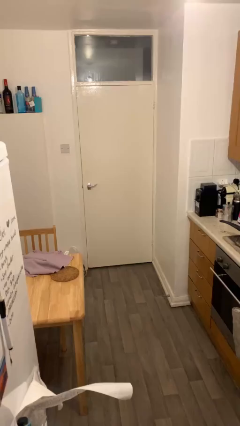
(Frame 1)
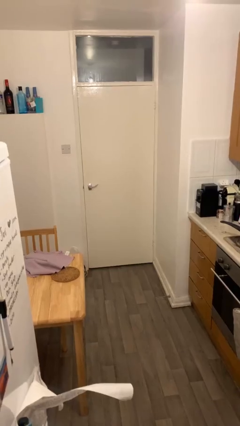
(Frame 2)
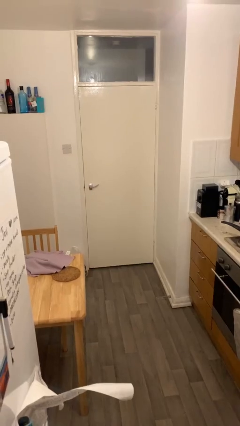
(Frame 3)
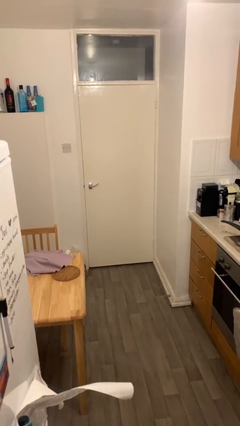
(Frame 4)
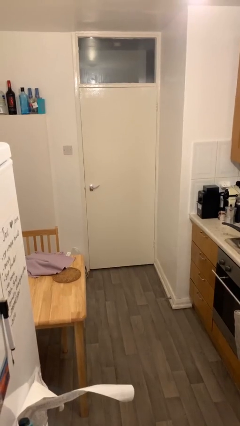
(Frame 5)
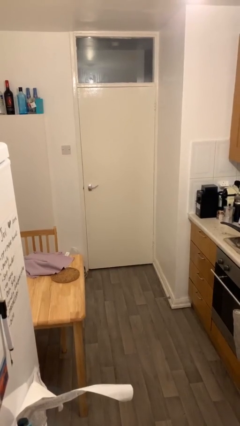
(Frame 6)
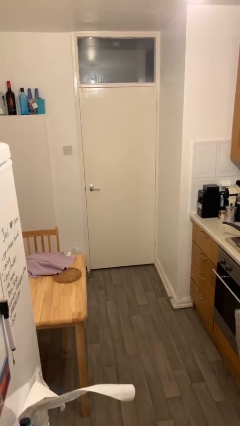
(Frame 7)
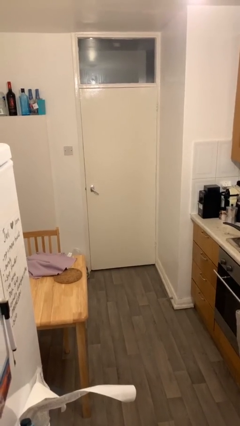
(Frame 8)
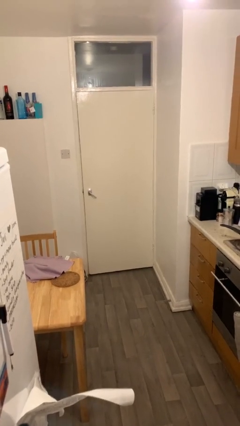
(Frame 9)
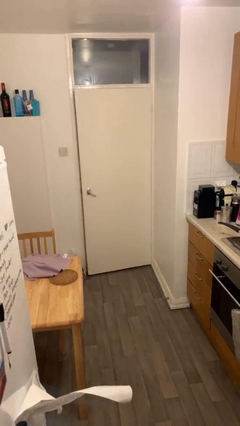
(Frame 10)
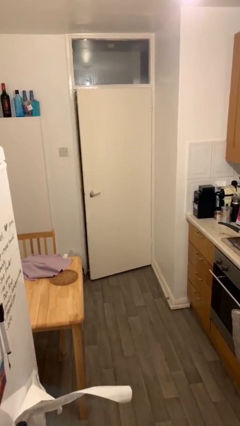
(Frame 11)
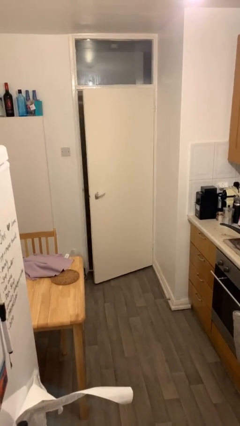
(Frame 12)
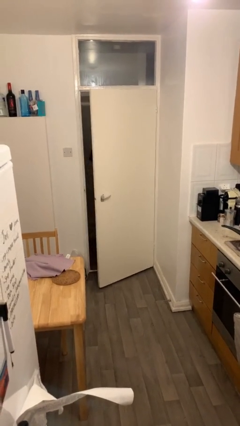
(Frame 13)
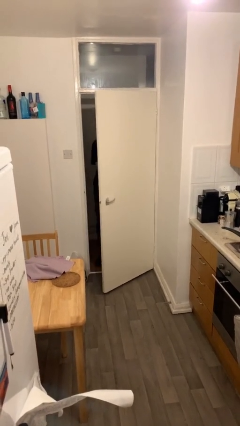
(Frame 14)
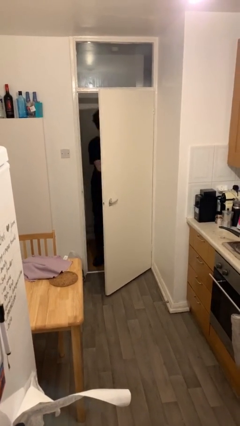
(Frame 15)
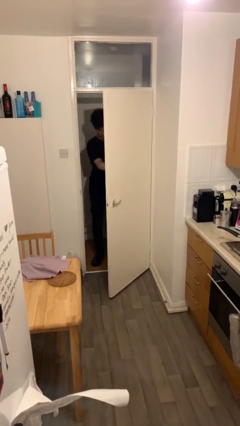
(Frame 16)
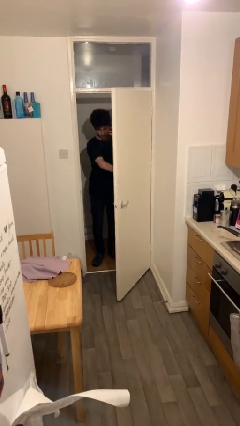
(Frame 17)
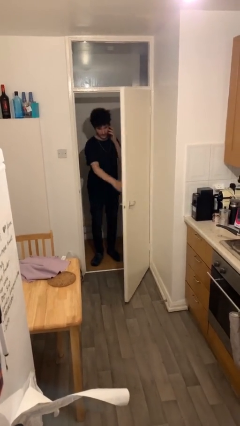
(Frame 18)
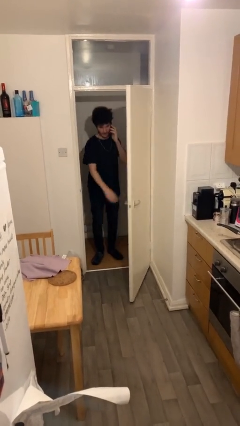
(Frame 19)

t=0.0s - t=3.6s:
person opens facility door

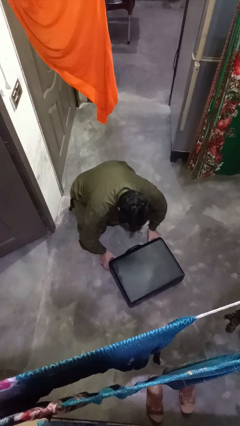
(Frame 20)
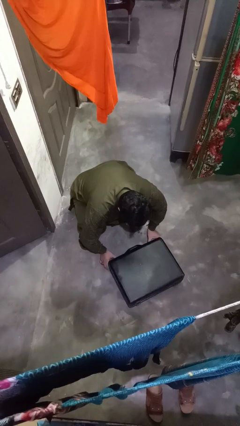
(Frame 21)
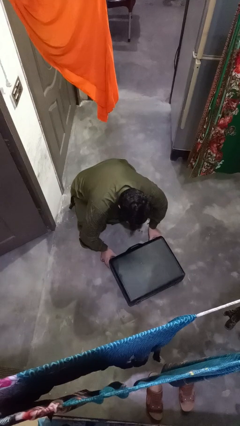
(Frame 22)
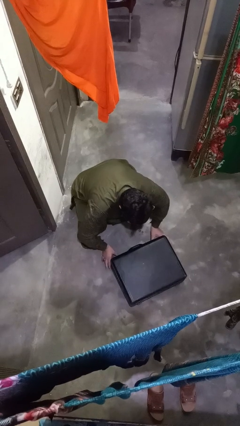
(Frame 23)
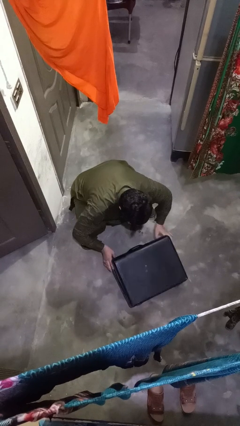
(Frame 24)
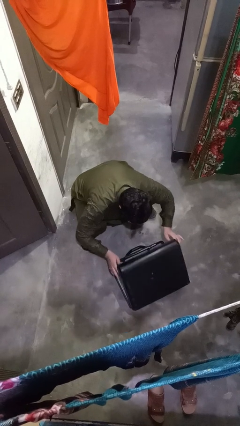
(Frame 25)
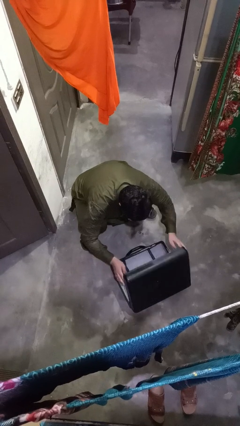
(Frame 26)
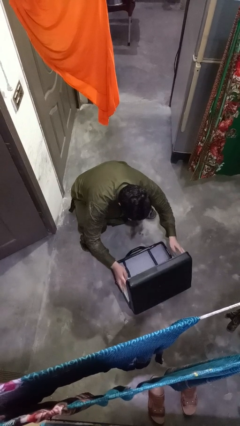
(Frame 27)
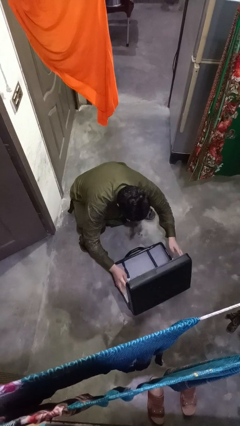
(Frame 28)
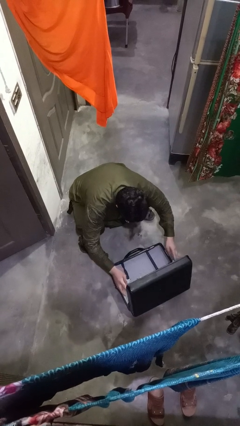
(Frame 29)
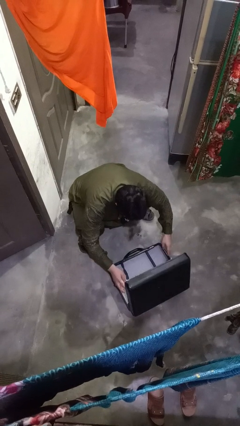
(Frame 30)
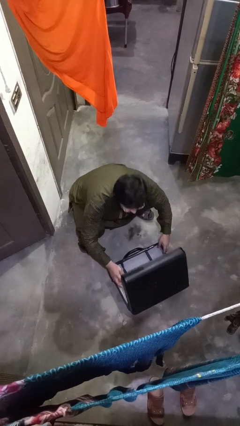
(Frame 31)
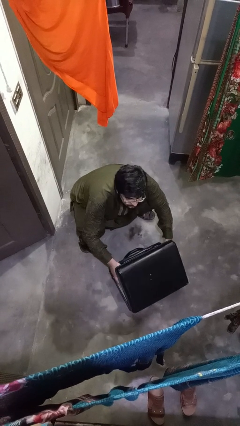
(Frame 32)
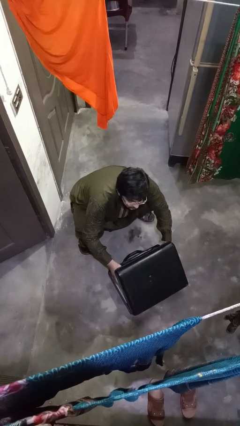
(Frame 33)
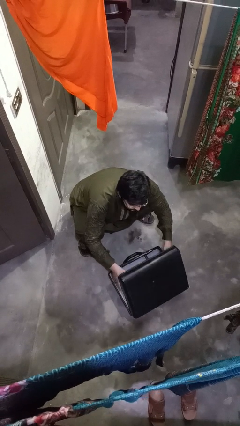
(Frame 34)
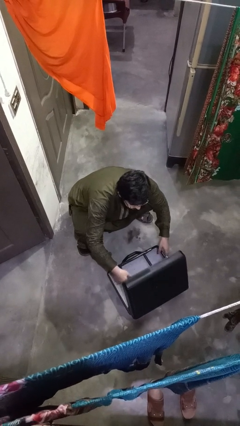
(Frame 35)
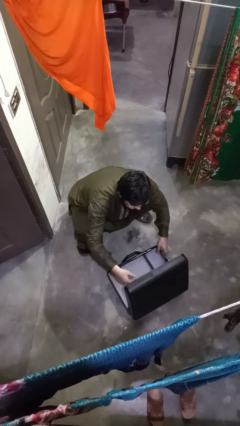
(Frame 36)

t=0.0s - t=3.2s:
person opens suitcase

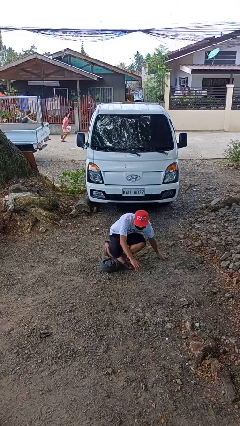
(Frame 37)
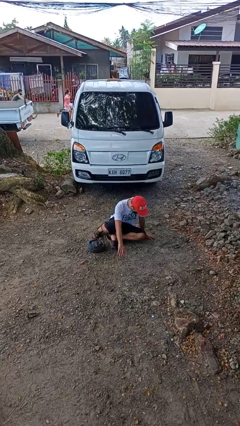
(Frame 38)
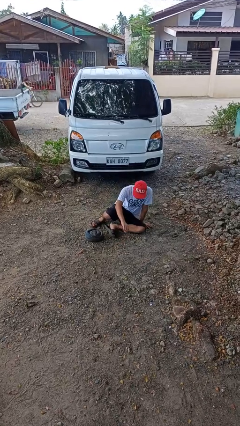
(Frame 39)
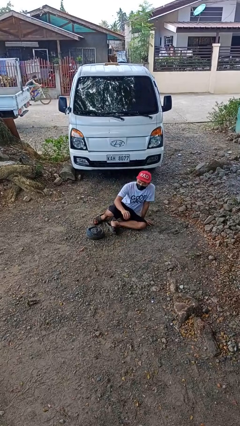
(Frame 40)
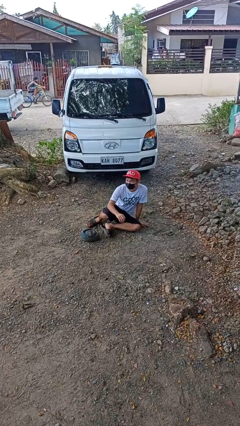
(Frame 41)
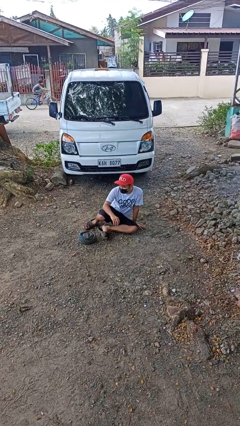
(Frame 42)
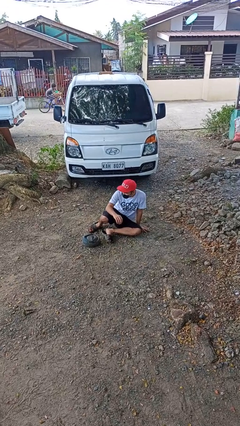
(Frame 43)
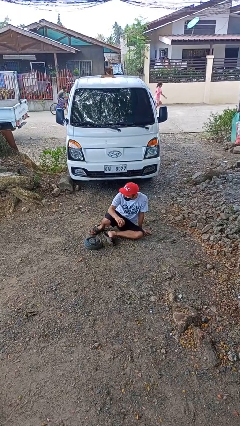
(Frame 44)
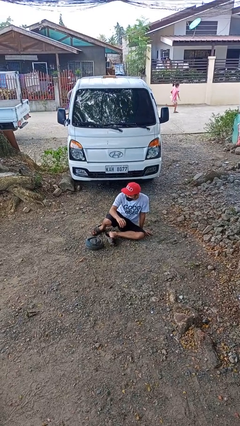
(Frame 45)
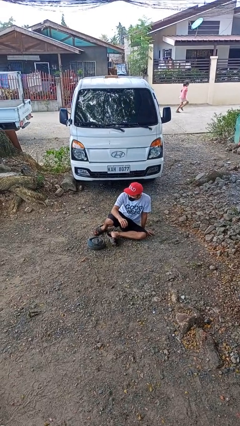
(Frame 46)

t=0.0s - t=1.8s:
person lies down on floor

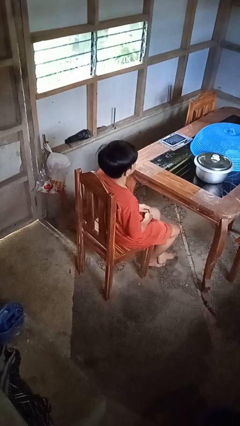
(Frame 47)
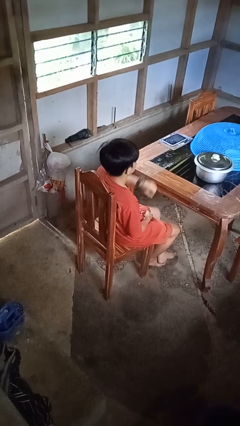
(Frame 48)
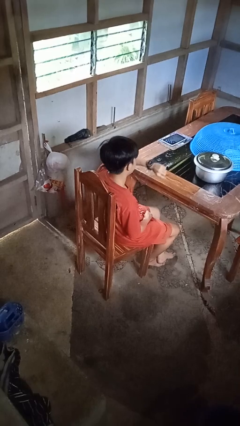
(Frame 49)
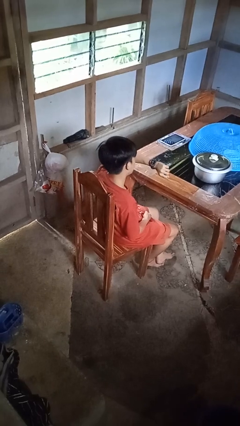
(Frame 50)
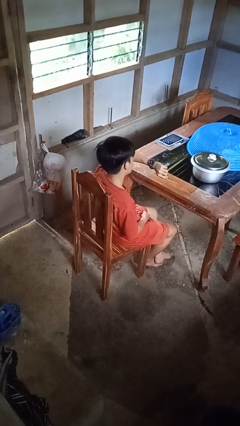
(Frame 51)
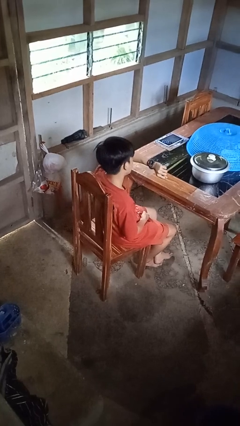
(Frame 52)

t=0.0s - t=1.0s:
person looks at wristwatch

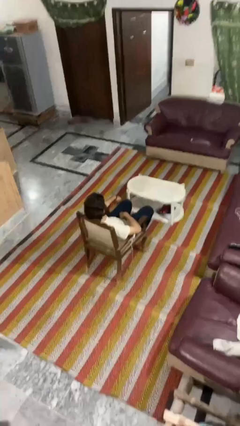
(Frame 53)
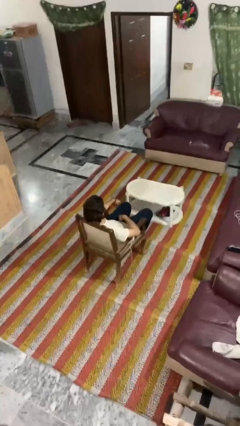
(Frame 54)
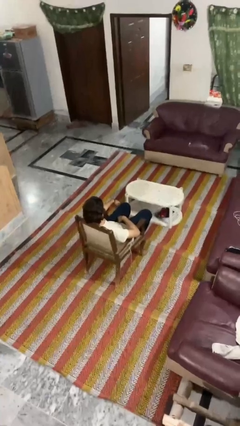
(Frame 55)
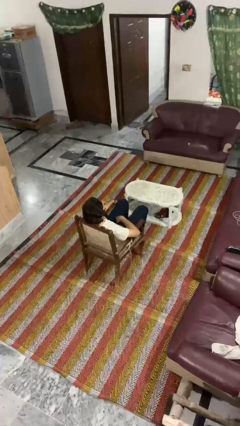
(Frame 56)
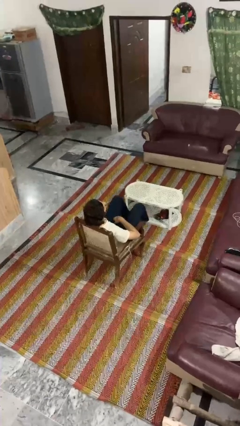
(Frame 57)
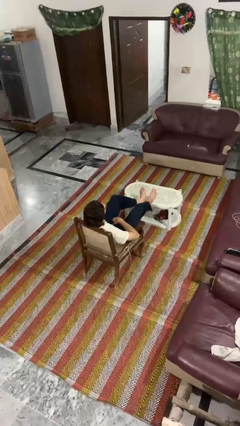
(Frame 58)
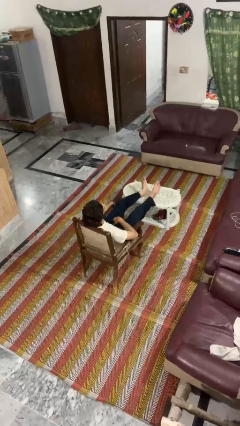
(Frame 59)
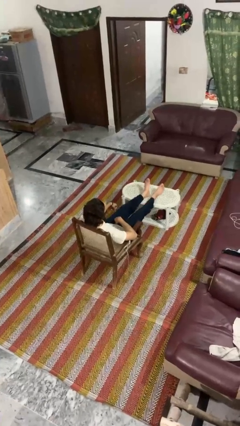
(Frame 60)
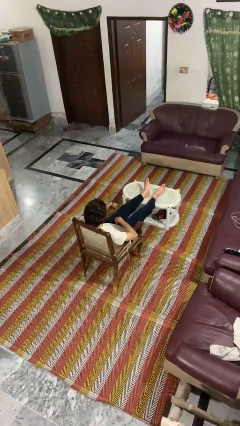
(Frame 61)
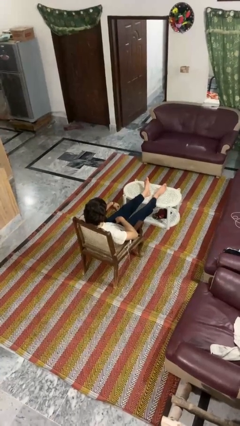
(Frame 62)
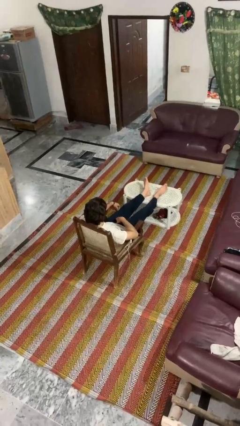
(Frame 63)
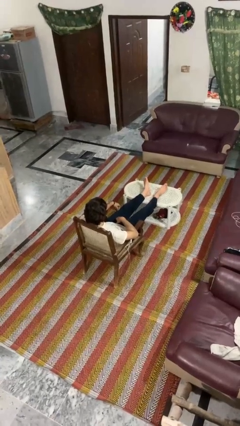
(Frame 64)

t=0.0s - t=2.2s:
person puts feet up

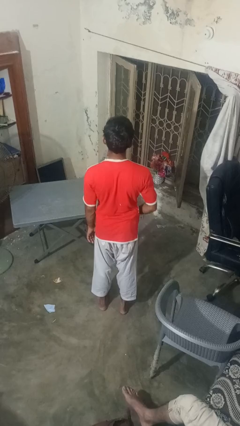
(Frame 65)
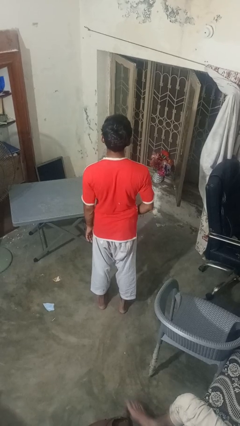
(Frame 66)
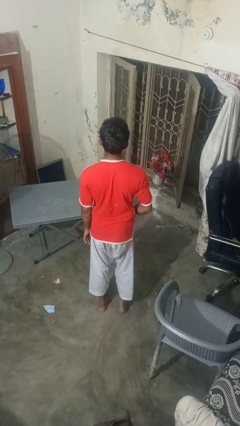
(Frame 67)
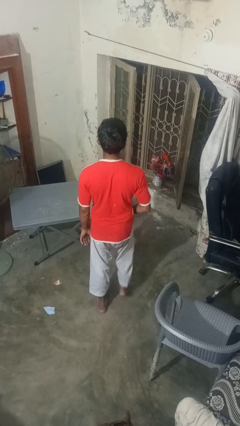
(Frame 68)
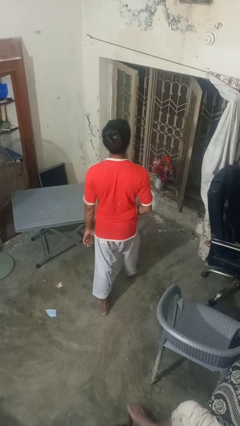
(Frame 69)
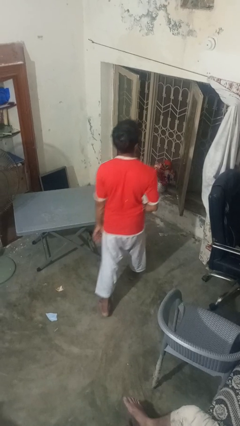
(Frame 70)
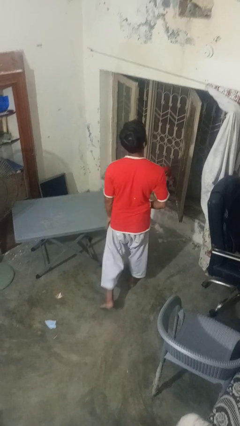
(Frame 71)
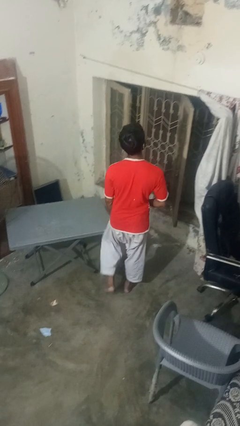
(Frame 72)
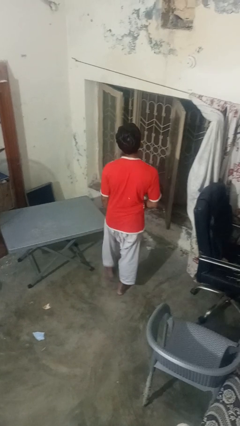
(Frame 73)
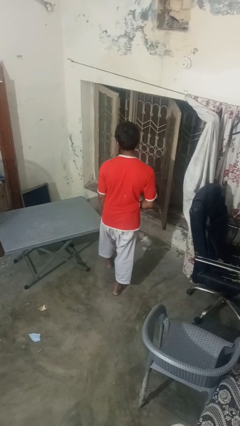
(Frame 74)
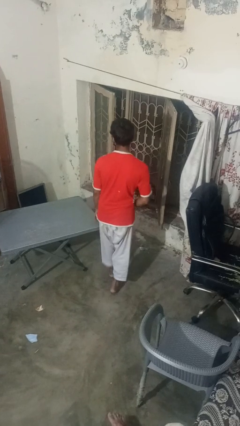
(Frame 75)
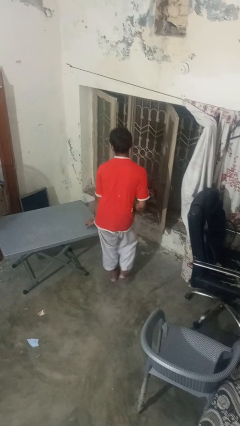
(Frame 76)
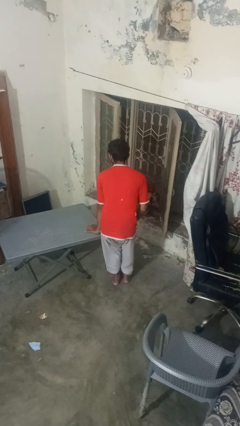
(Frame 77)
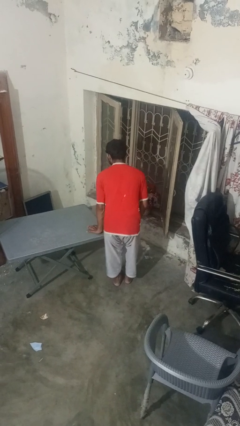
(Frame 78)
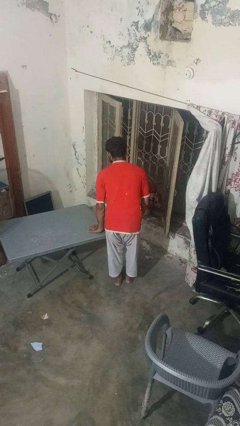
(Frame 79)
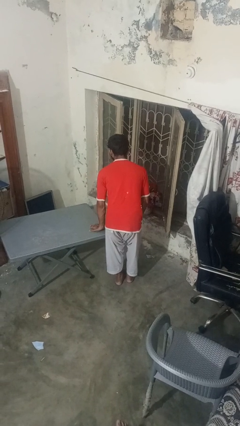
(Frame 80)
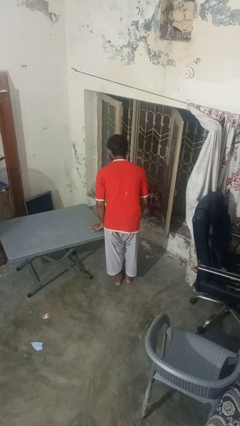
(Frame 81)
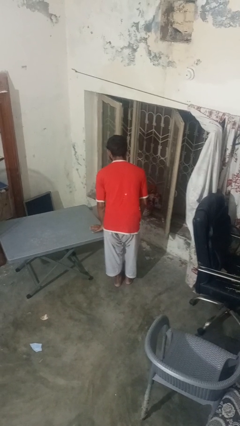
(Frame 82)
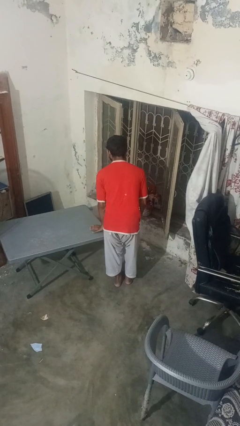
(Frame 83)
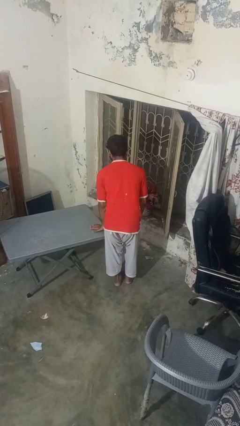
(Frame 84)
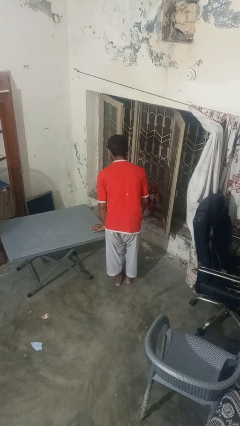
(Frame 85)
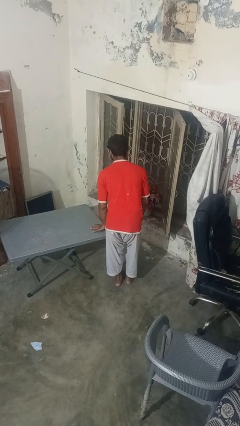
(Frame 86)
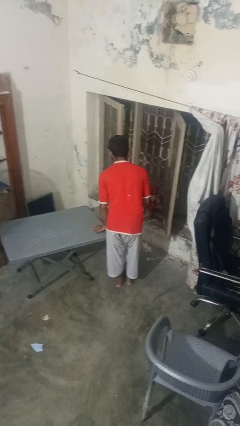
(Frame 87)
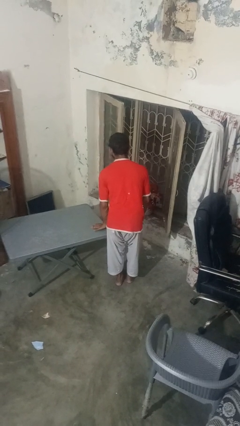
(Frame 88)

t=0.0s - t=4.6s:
person bumps into table

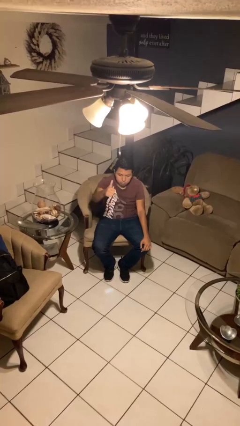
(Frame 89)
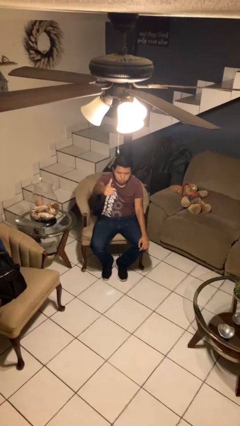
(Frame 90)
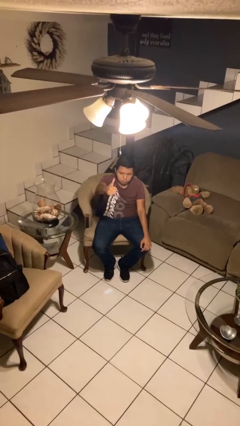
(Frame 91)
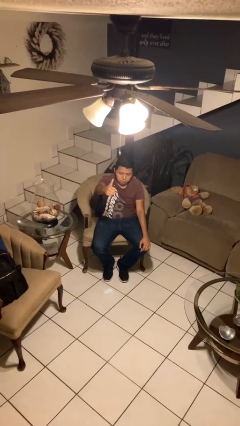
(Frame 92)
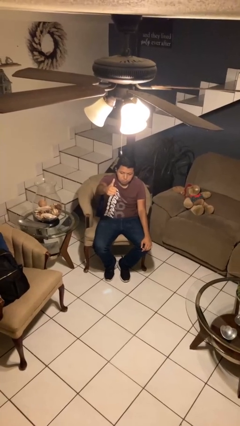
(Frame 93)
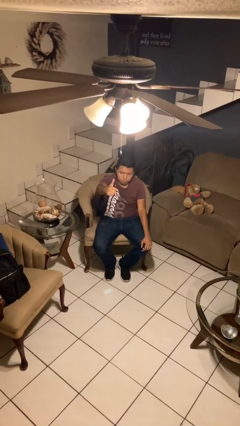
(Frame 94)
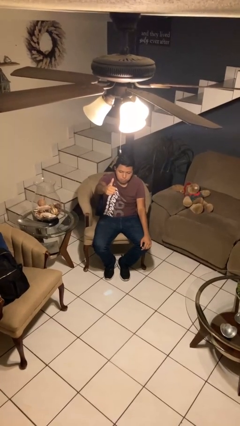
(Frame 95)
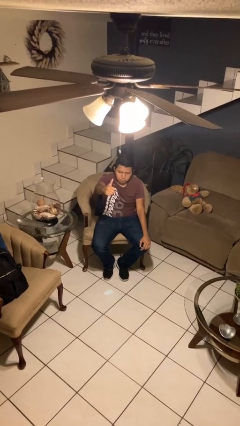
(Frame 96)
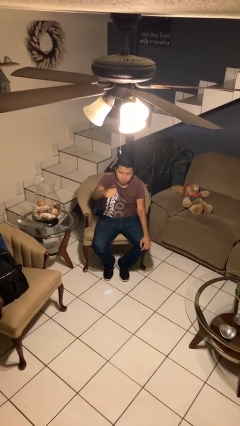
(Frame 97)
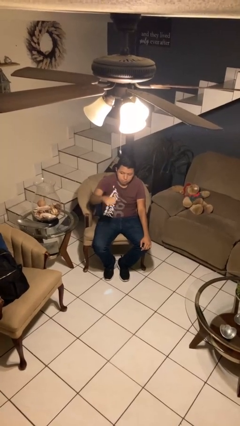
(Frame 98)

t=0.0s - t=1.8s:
person gestures thumbs up
